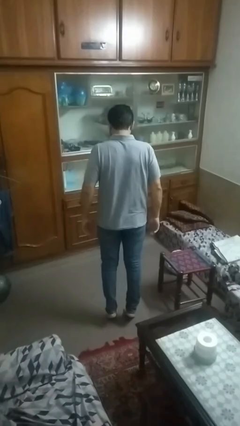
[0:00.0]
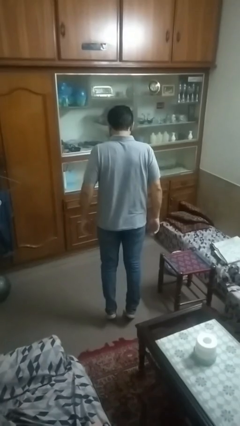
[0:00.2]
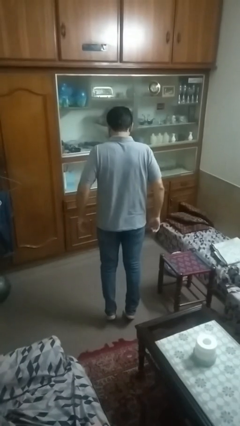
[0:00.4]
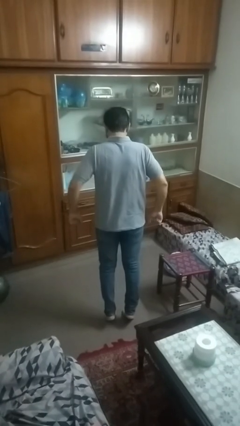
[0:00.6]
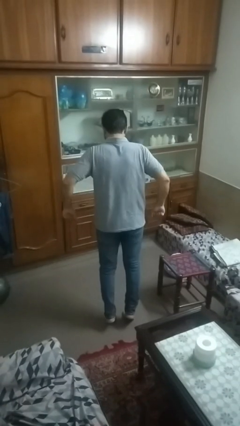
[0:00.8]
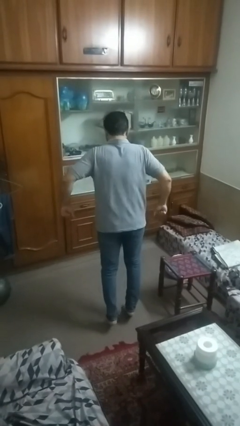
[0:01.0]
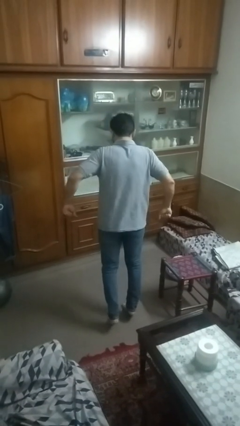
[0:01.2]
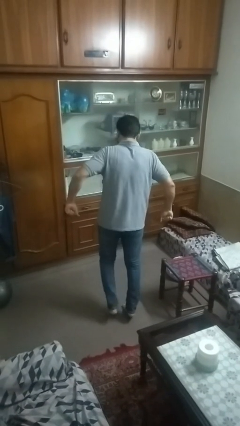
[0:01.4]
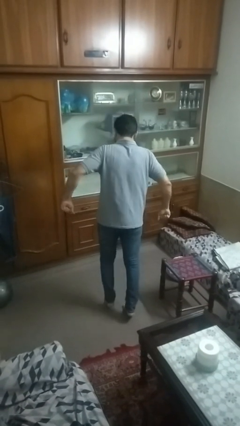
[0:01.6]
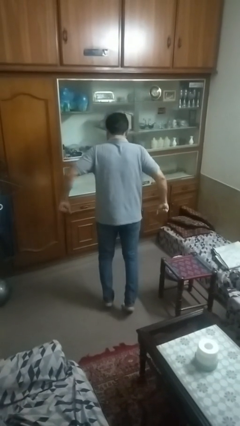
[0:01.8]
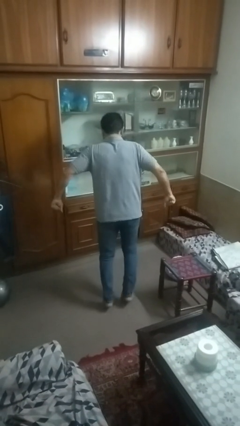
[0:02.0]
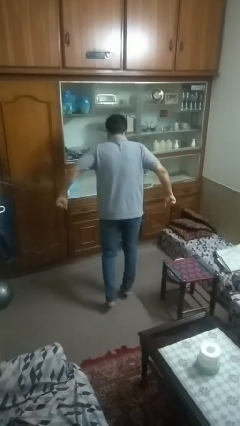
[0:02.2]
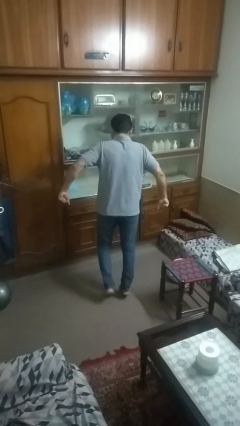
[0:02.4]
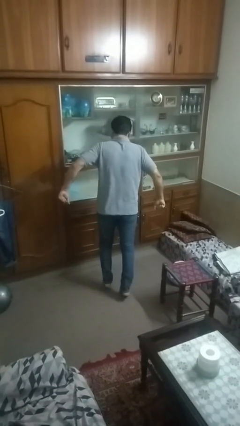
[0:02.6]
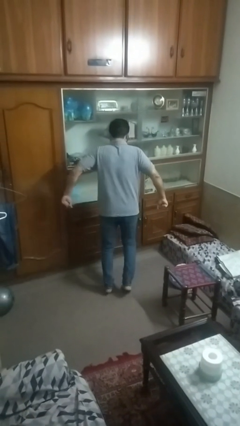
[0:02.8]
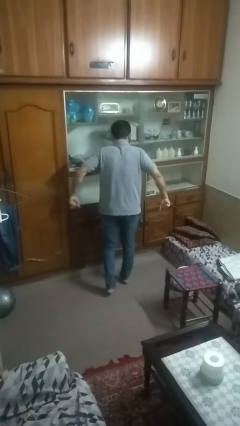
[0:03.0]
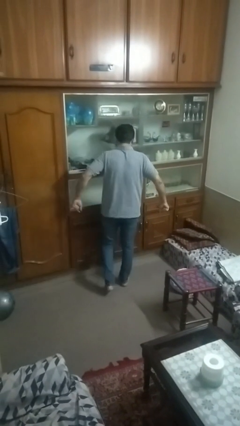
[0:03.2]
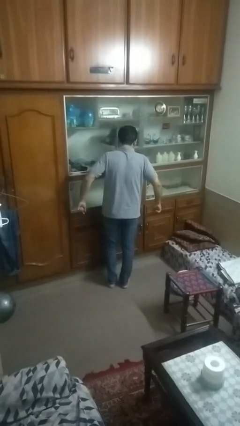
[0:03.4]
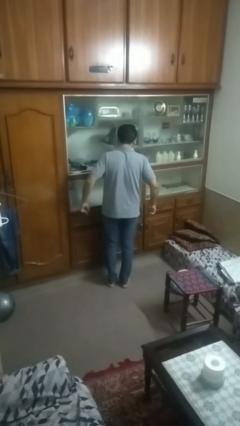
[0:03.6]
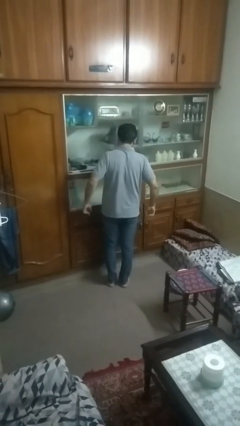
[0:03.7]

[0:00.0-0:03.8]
person walks tiptoe

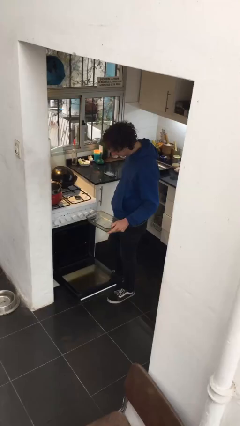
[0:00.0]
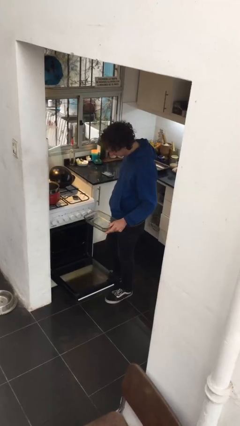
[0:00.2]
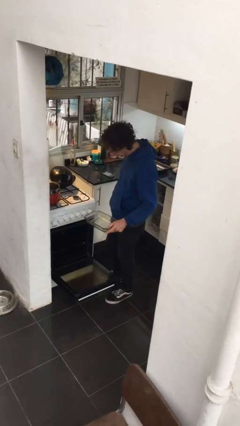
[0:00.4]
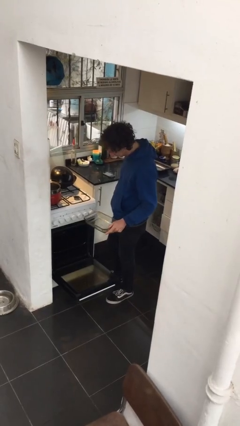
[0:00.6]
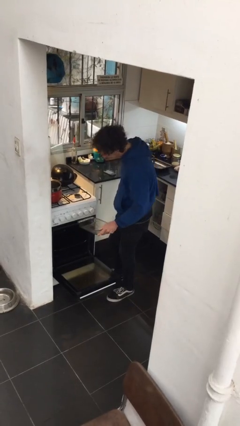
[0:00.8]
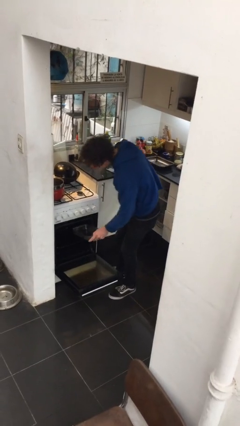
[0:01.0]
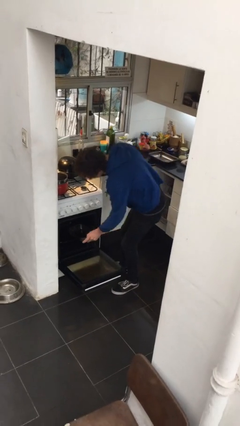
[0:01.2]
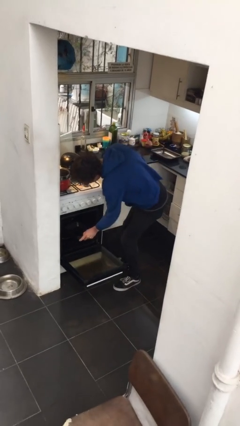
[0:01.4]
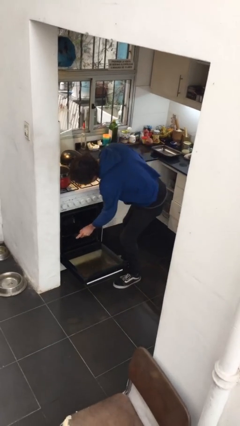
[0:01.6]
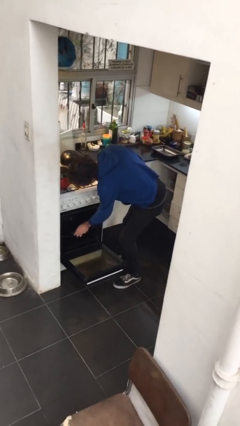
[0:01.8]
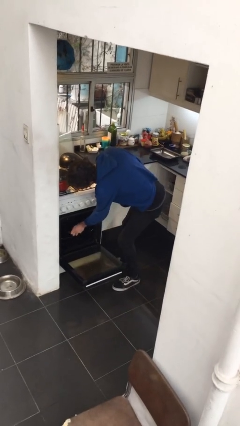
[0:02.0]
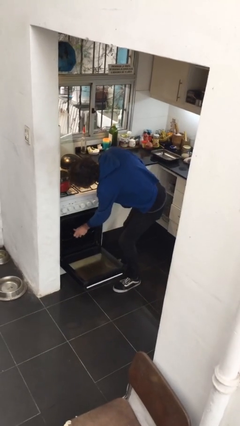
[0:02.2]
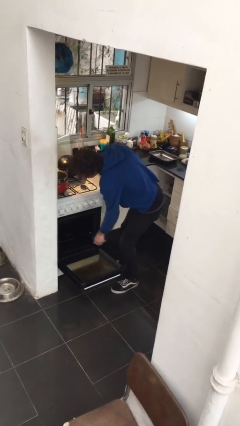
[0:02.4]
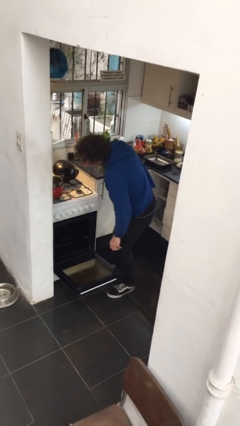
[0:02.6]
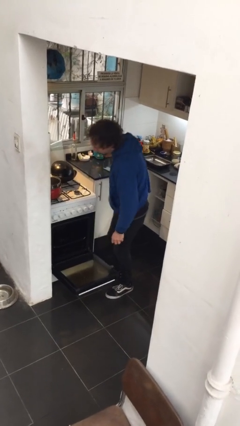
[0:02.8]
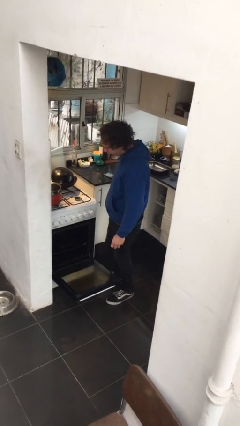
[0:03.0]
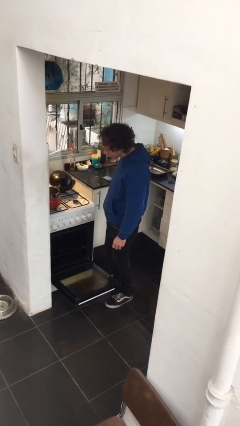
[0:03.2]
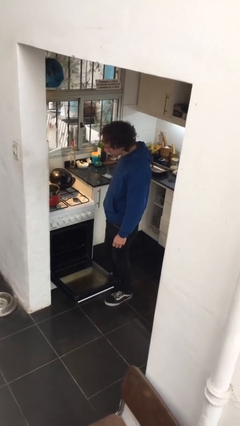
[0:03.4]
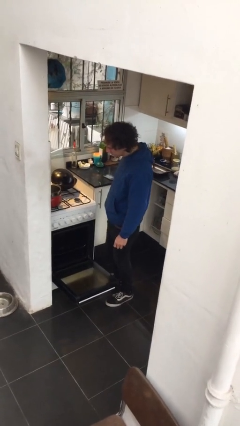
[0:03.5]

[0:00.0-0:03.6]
person puts object into oven

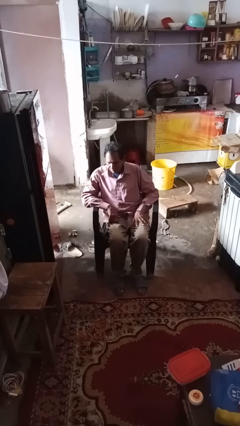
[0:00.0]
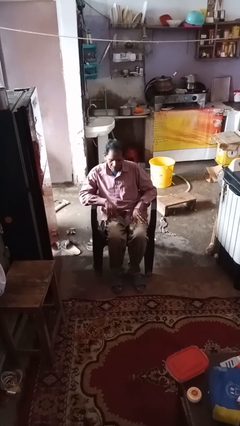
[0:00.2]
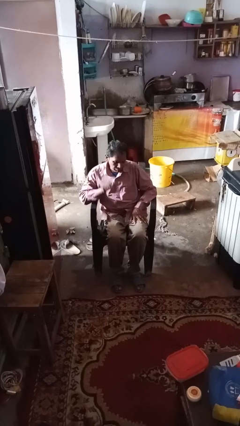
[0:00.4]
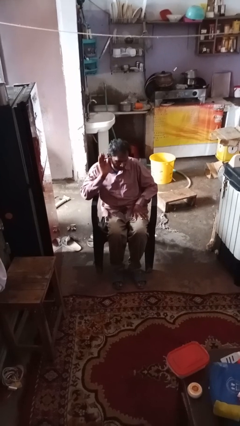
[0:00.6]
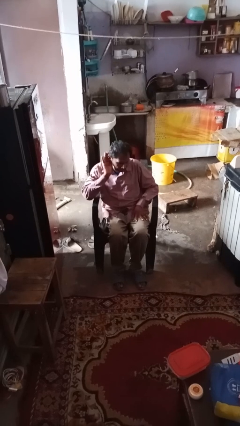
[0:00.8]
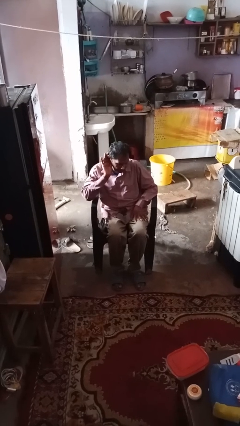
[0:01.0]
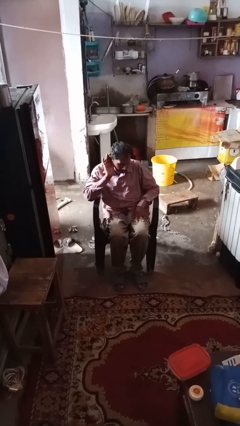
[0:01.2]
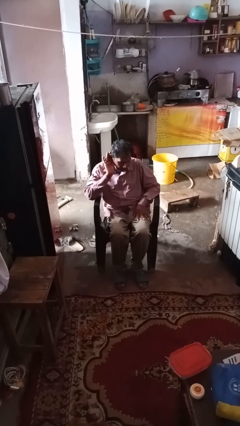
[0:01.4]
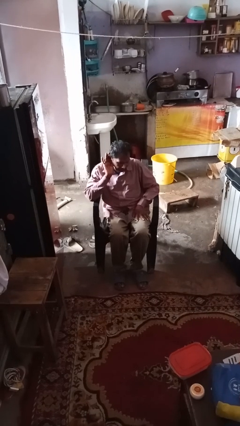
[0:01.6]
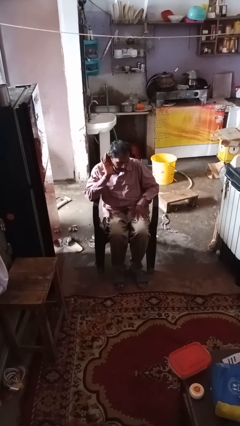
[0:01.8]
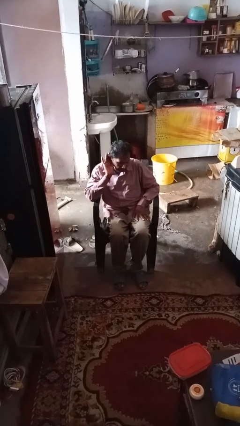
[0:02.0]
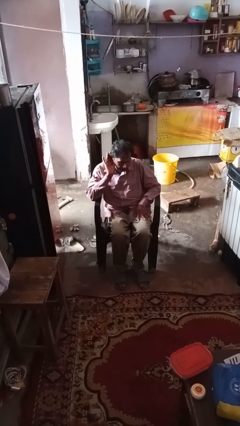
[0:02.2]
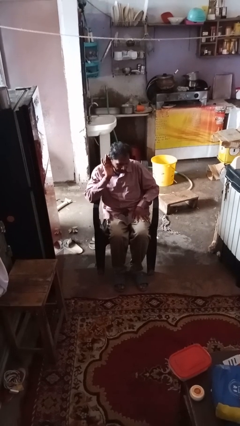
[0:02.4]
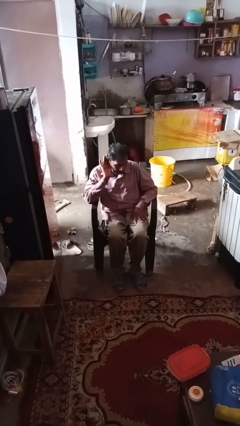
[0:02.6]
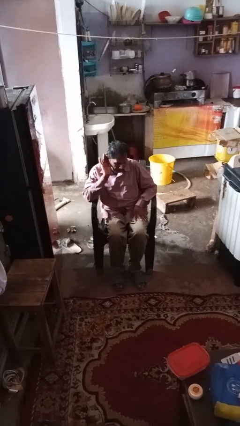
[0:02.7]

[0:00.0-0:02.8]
person gestures listen closely

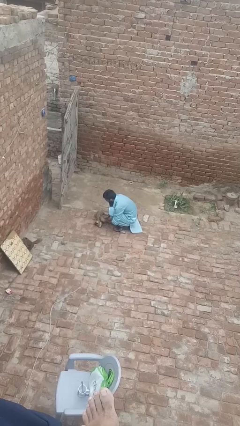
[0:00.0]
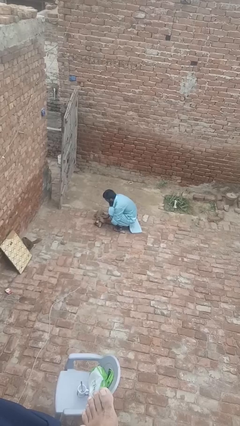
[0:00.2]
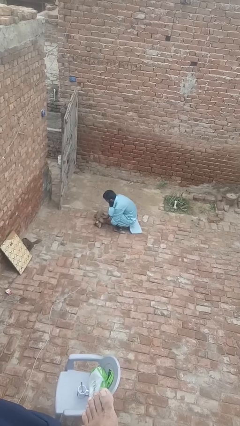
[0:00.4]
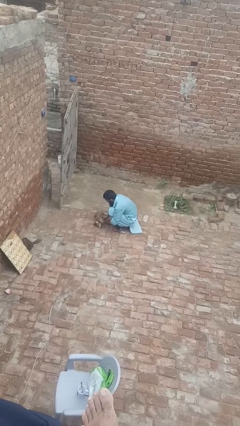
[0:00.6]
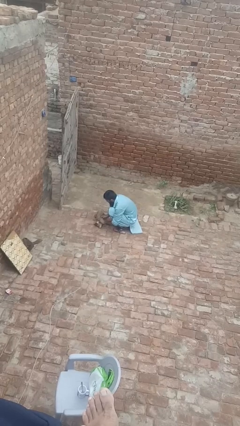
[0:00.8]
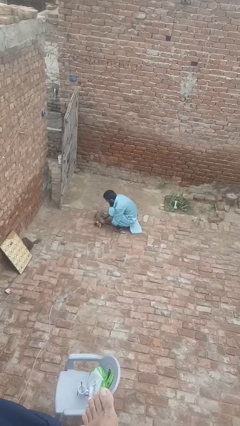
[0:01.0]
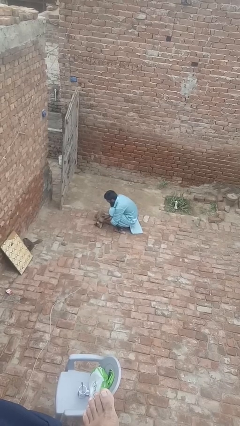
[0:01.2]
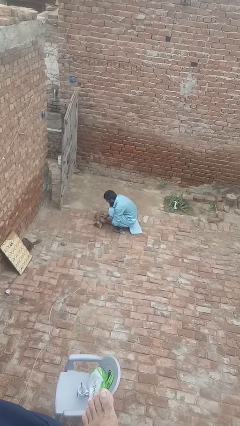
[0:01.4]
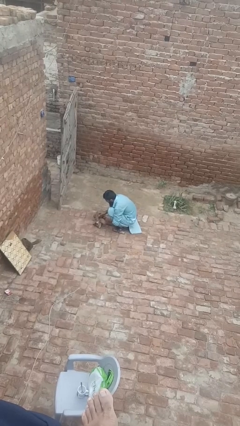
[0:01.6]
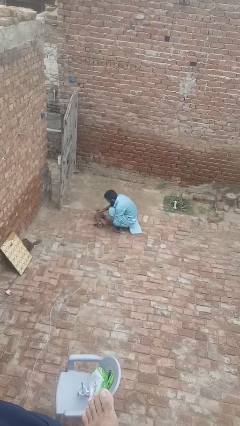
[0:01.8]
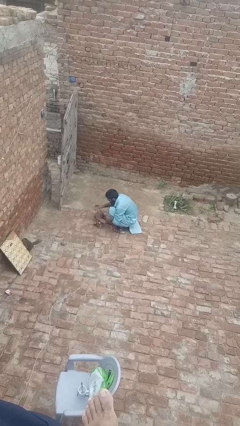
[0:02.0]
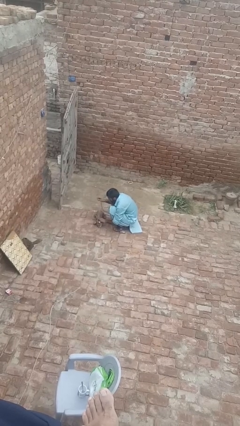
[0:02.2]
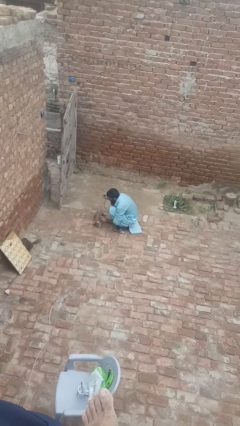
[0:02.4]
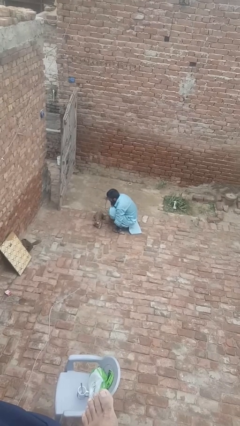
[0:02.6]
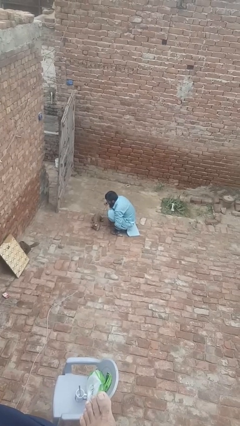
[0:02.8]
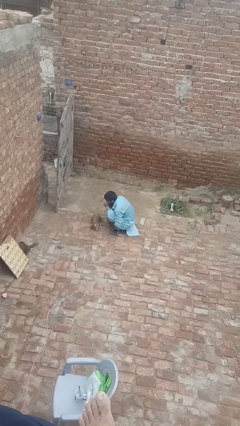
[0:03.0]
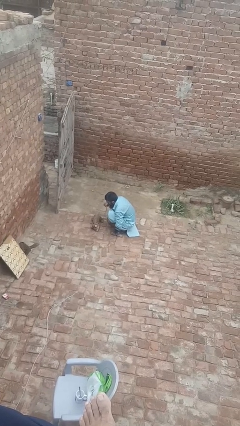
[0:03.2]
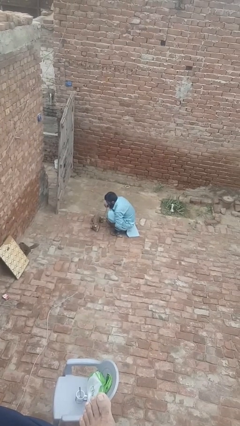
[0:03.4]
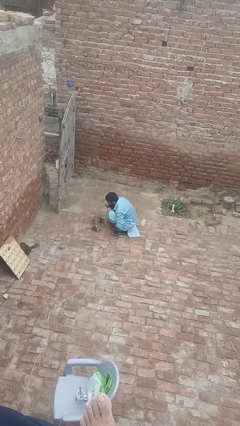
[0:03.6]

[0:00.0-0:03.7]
person unattaches leash from dog

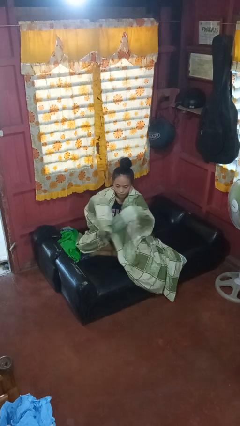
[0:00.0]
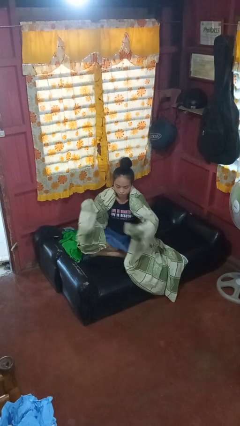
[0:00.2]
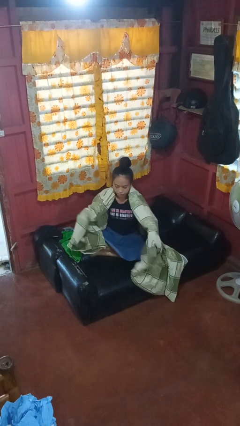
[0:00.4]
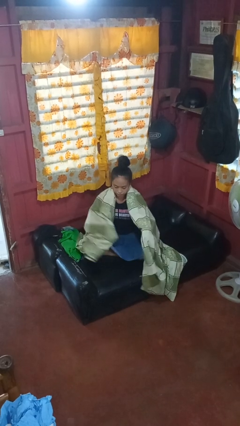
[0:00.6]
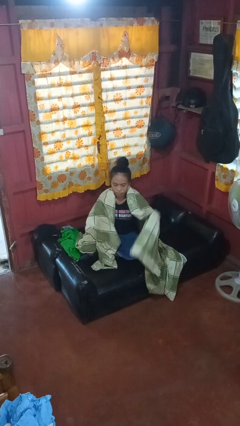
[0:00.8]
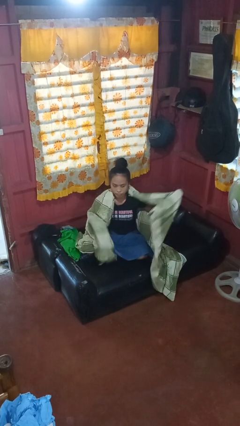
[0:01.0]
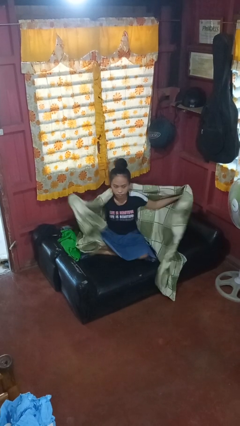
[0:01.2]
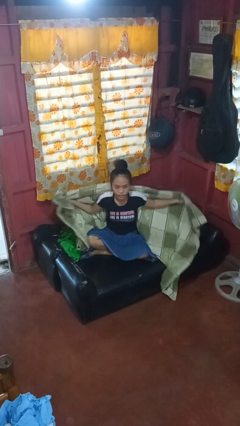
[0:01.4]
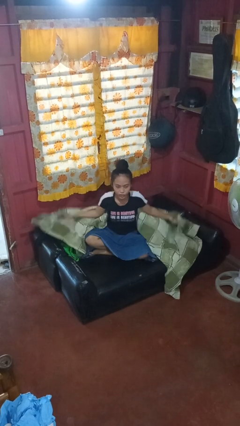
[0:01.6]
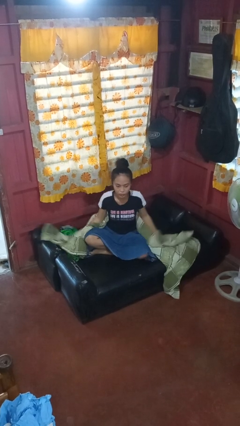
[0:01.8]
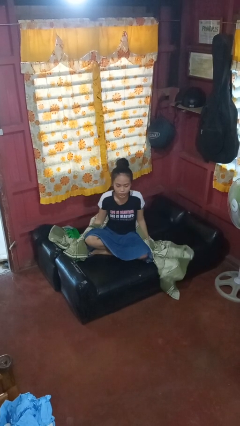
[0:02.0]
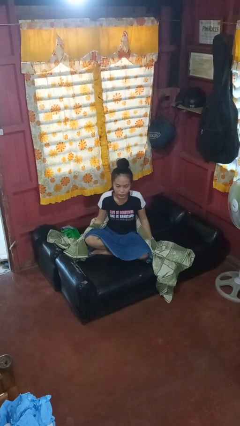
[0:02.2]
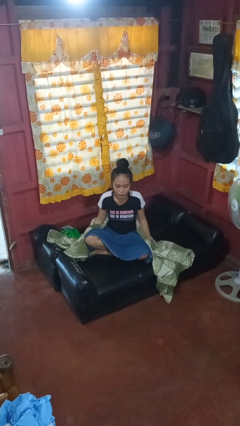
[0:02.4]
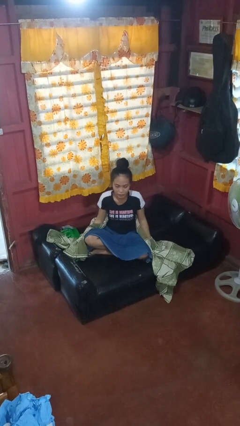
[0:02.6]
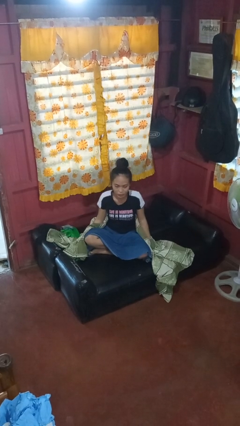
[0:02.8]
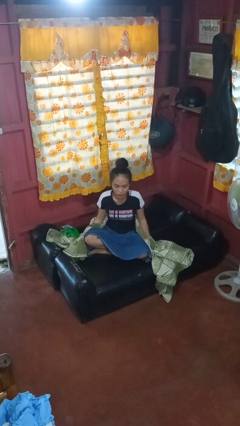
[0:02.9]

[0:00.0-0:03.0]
person uncovers with blanket

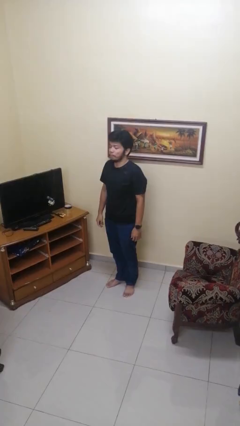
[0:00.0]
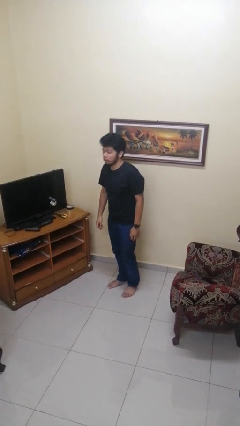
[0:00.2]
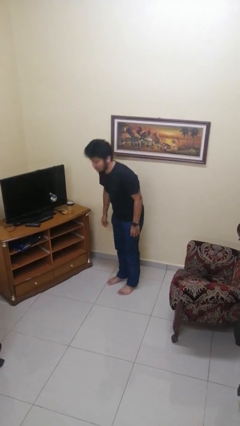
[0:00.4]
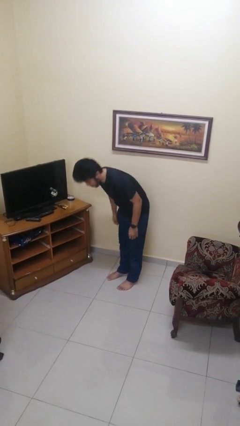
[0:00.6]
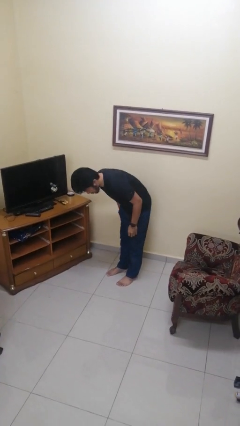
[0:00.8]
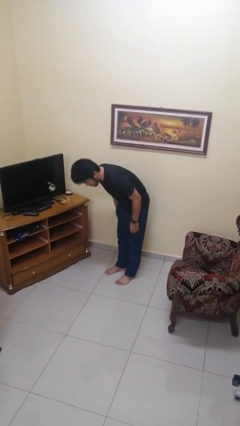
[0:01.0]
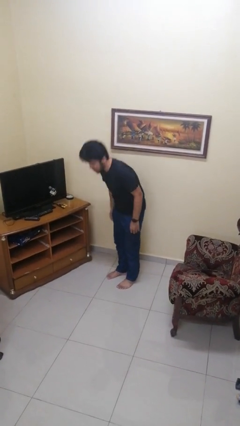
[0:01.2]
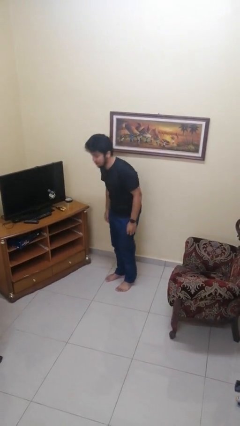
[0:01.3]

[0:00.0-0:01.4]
person bows
